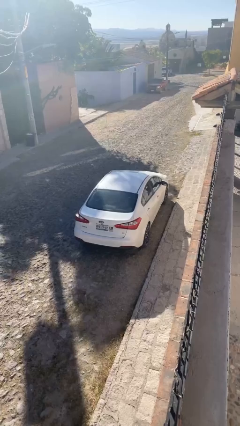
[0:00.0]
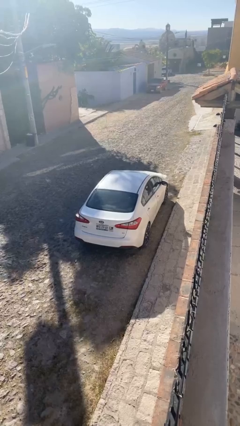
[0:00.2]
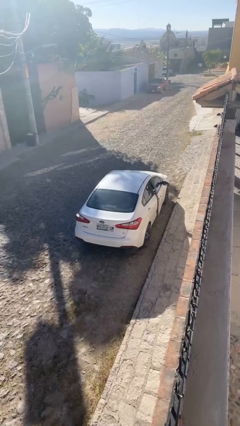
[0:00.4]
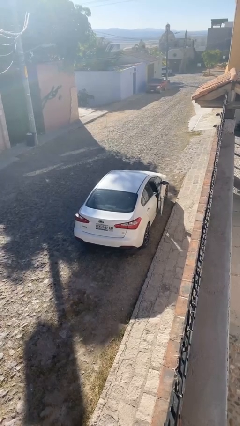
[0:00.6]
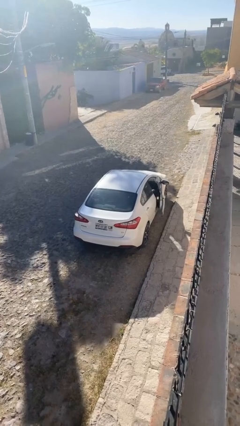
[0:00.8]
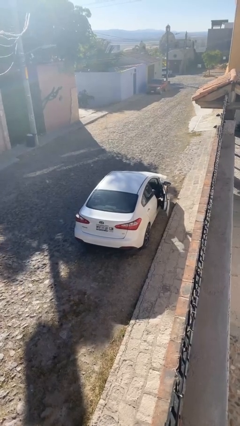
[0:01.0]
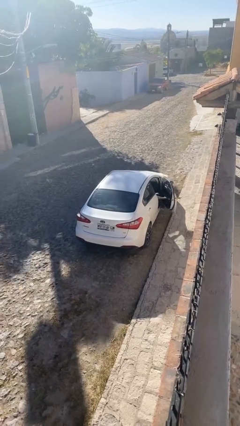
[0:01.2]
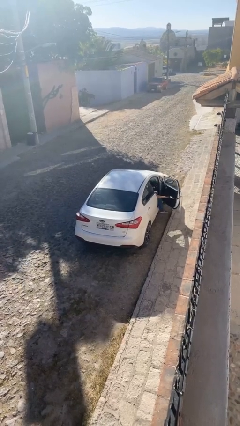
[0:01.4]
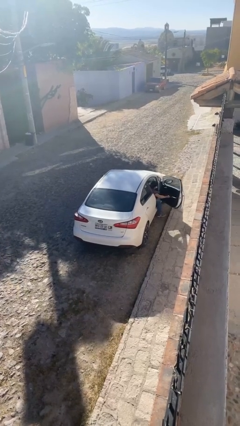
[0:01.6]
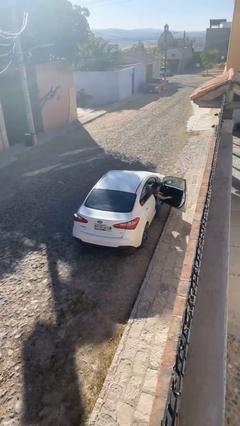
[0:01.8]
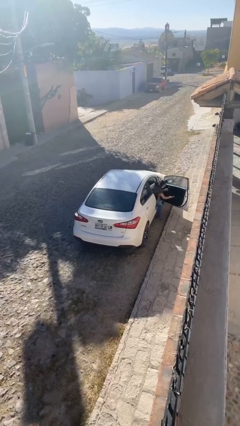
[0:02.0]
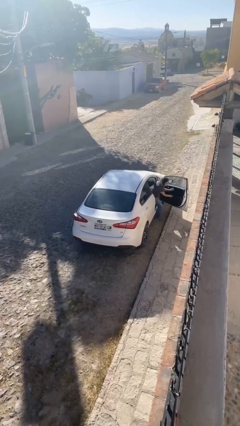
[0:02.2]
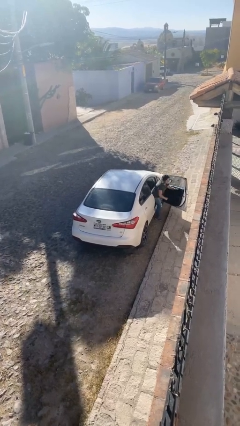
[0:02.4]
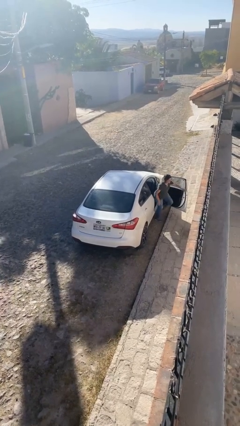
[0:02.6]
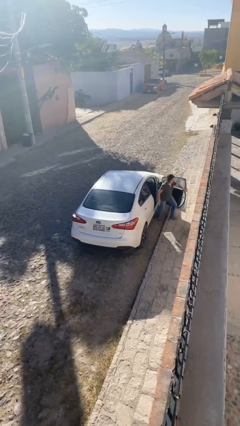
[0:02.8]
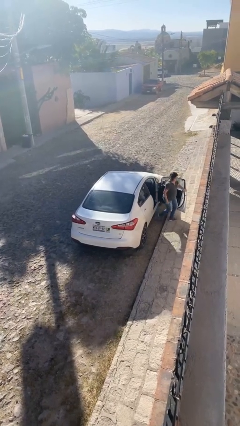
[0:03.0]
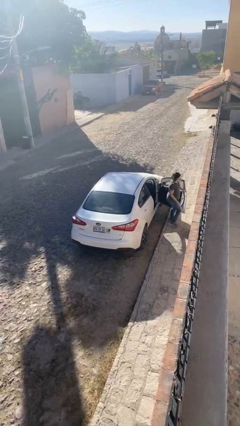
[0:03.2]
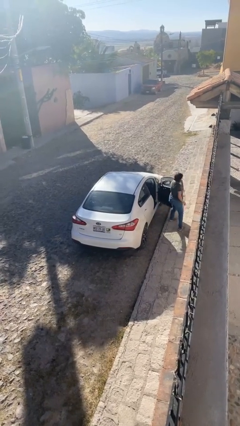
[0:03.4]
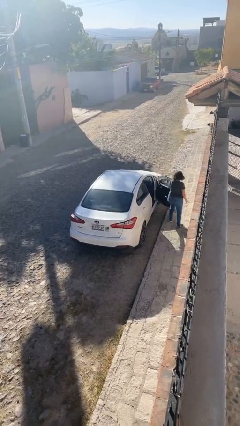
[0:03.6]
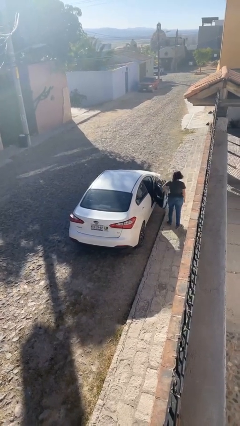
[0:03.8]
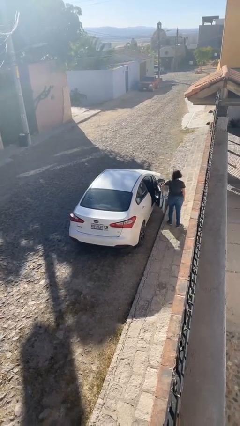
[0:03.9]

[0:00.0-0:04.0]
car drops off person

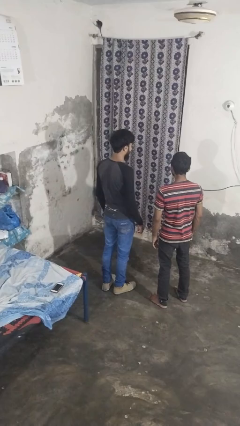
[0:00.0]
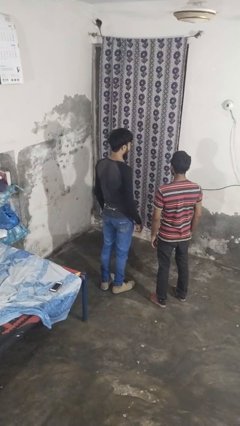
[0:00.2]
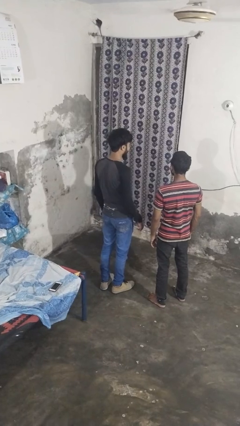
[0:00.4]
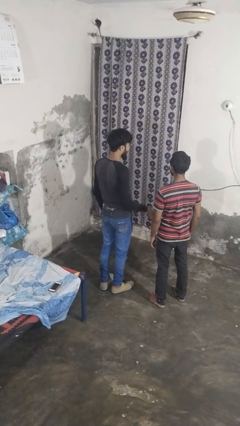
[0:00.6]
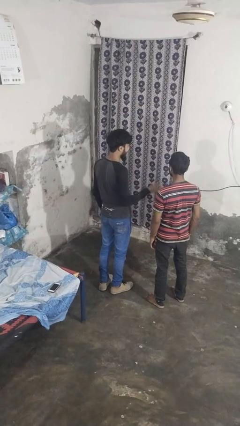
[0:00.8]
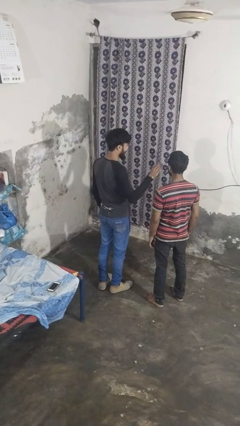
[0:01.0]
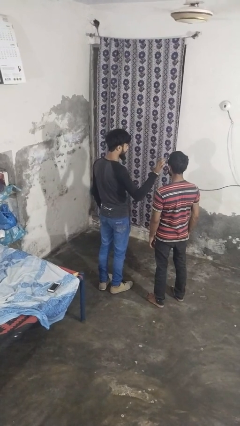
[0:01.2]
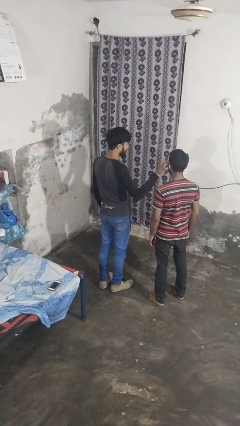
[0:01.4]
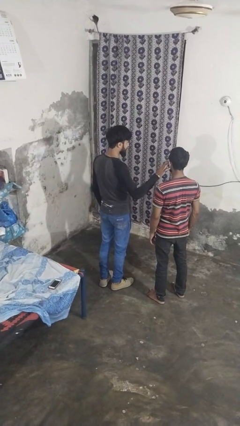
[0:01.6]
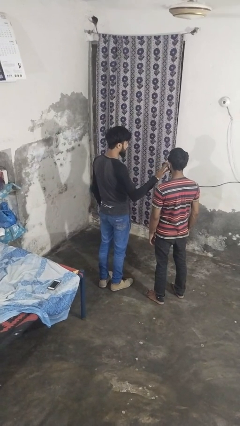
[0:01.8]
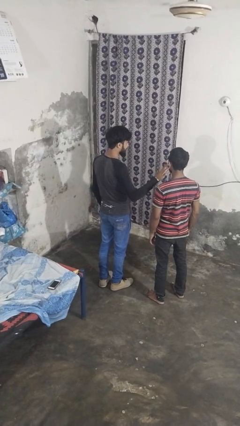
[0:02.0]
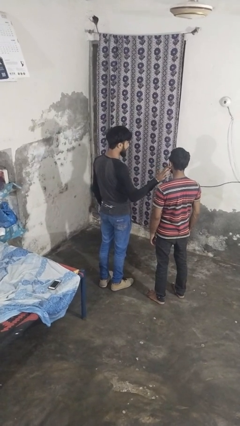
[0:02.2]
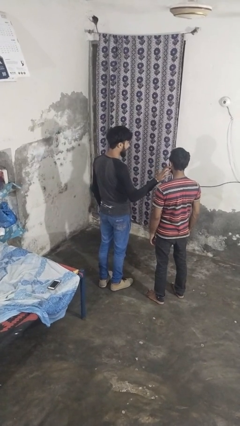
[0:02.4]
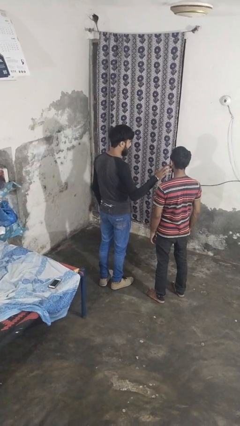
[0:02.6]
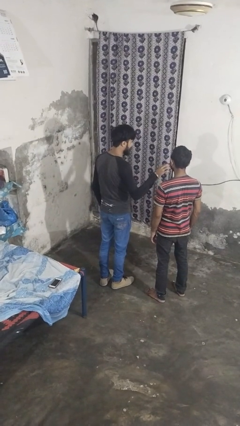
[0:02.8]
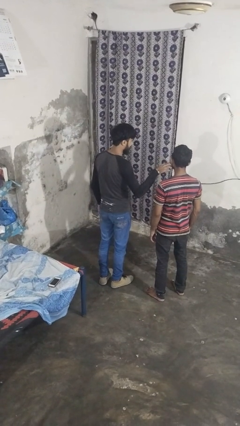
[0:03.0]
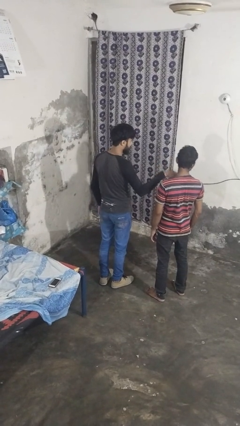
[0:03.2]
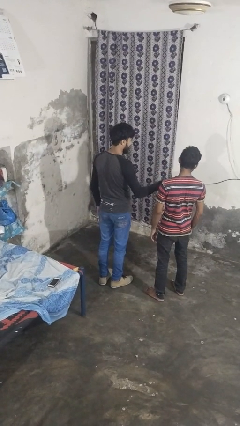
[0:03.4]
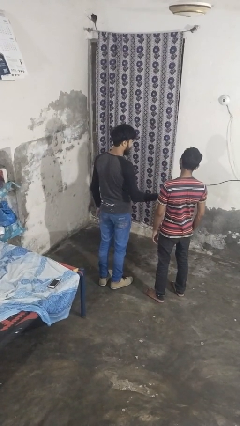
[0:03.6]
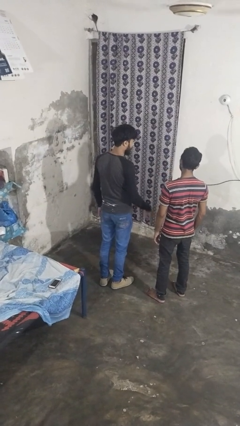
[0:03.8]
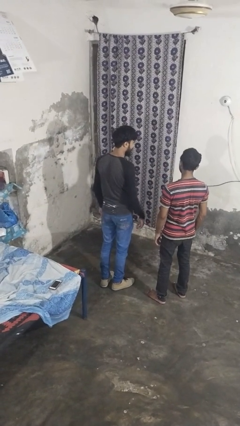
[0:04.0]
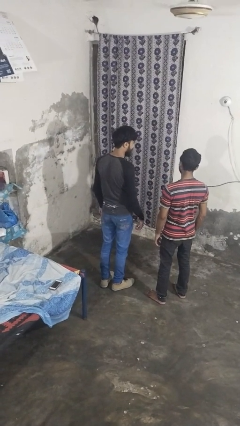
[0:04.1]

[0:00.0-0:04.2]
person touches face of person

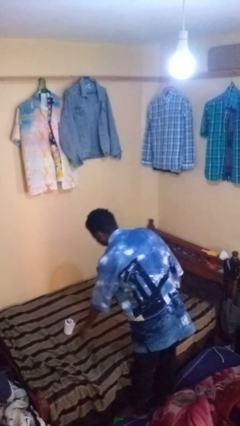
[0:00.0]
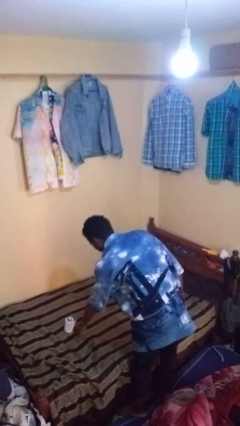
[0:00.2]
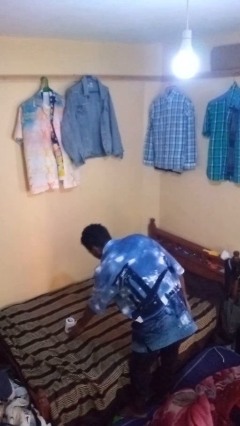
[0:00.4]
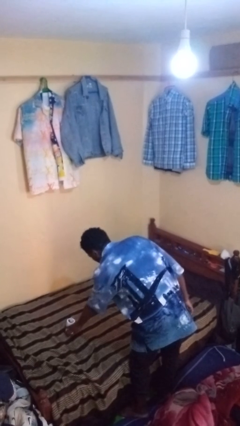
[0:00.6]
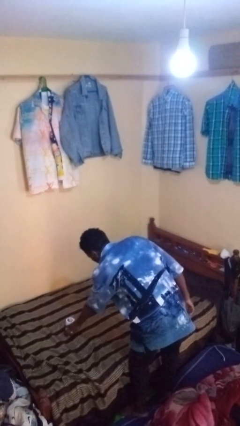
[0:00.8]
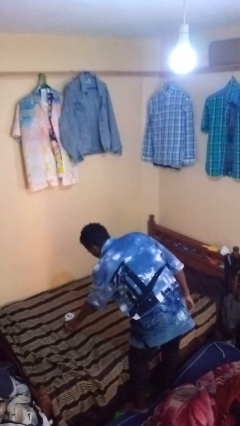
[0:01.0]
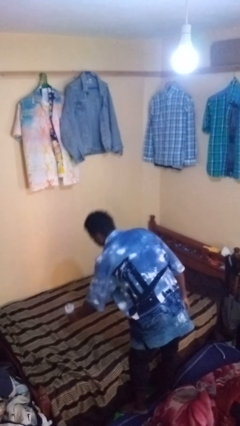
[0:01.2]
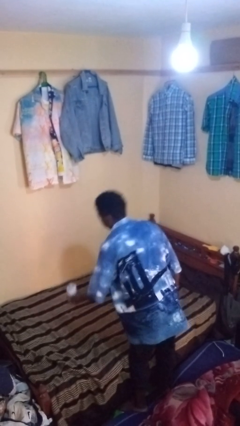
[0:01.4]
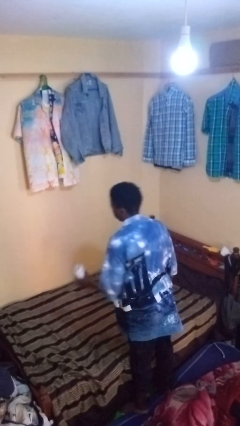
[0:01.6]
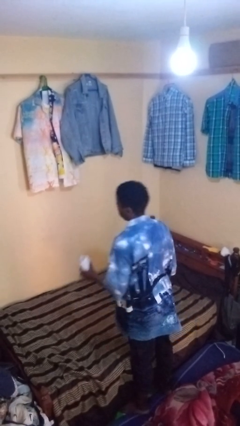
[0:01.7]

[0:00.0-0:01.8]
person picks up object from bed

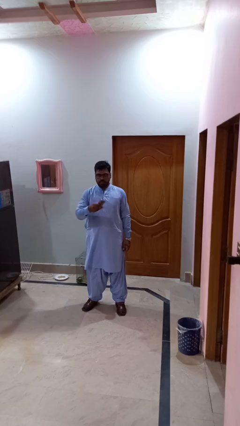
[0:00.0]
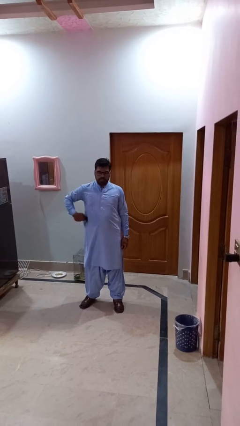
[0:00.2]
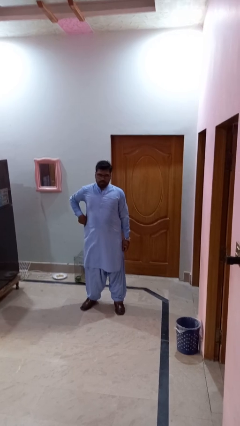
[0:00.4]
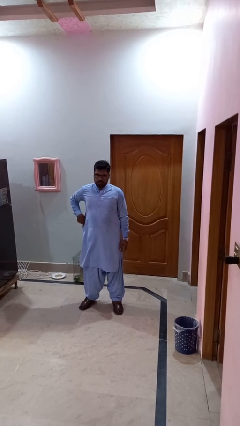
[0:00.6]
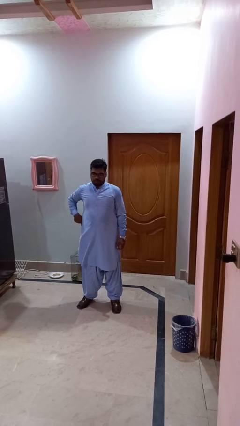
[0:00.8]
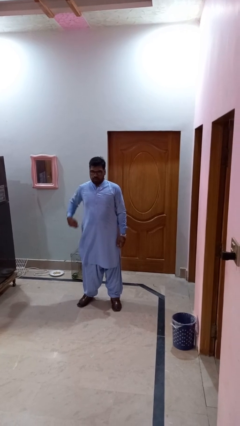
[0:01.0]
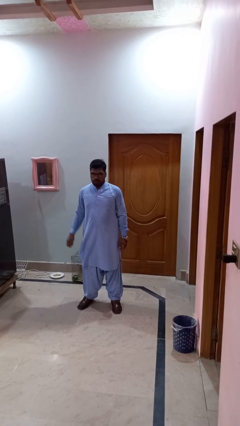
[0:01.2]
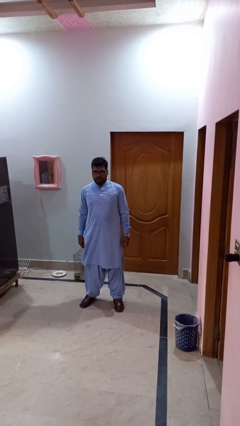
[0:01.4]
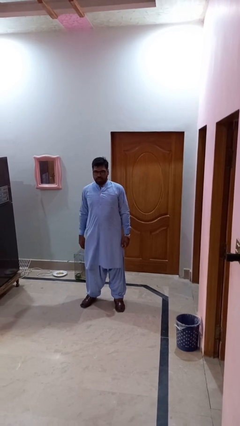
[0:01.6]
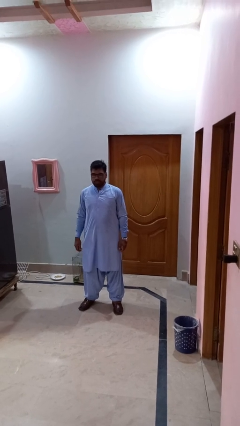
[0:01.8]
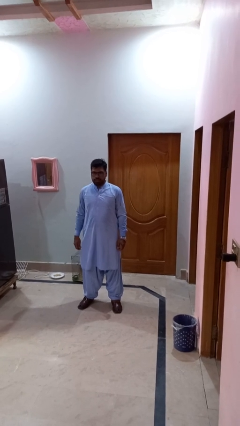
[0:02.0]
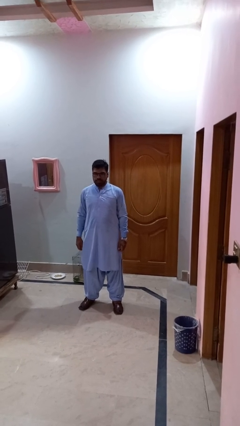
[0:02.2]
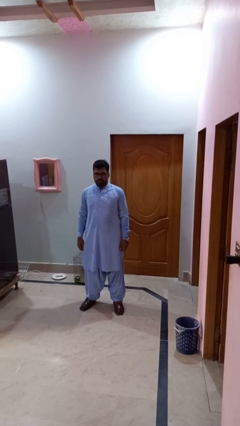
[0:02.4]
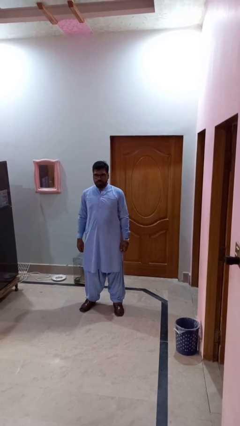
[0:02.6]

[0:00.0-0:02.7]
person puts phone into pocket

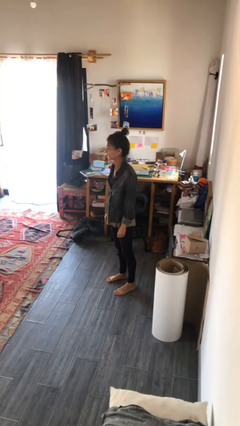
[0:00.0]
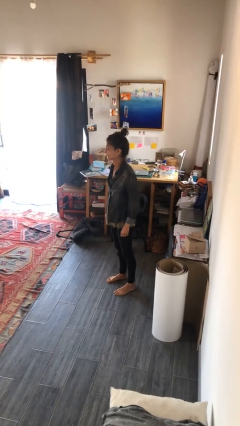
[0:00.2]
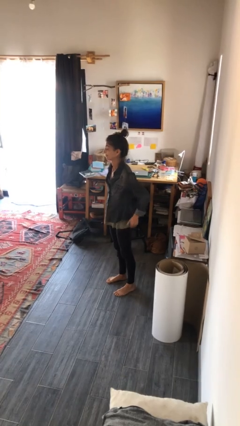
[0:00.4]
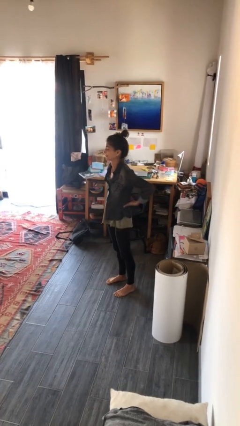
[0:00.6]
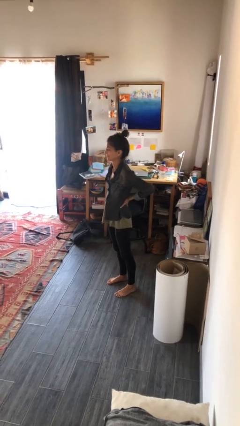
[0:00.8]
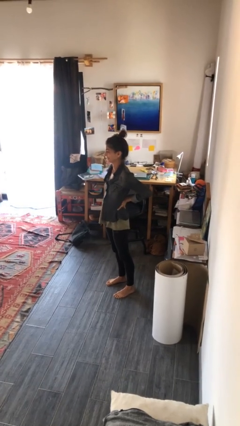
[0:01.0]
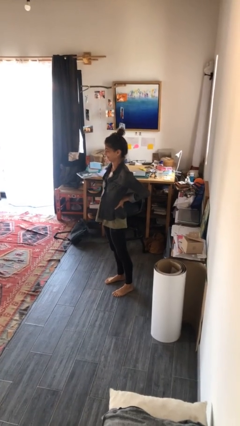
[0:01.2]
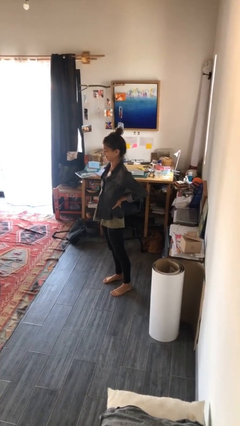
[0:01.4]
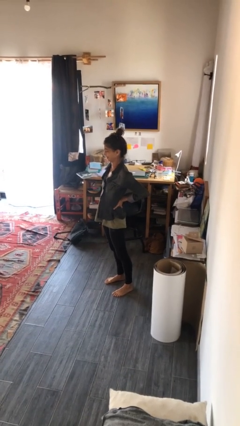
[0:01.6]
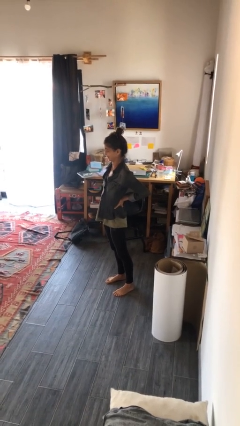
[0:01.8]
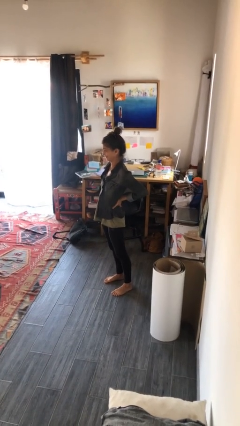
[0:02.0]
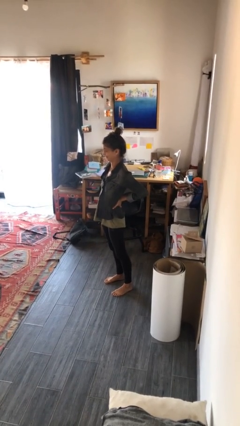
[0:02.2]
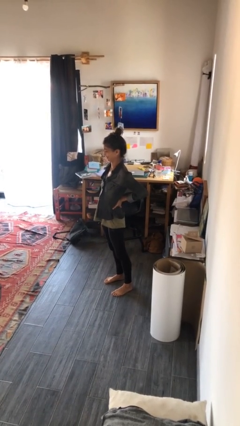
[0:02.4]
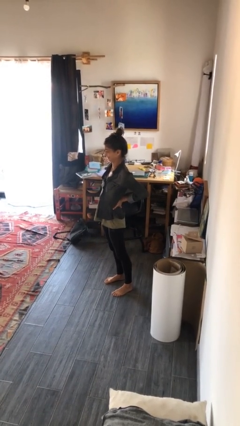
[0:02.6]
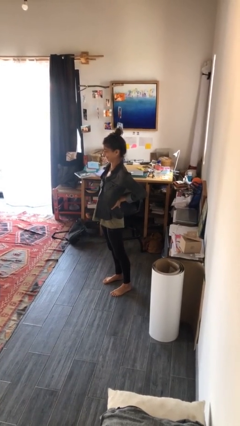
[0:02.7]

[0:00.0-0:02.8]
person stretches back

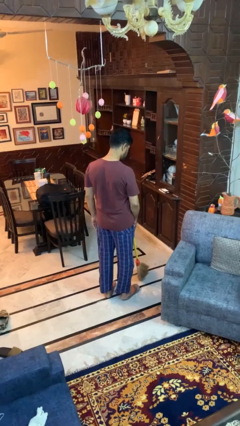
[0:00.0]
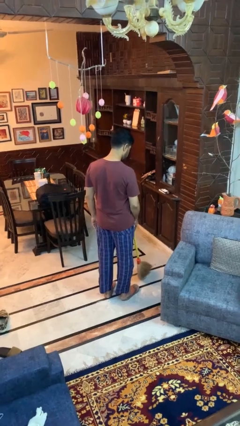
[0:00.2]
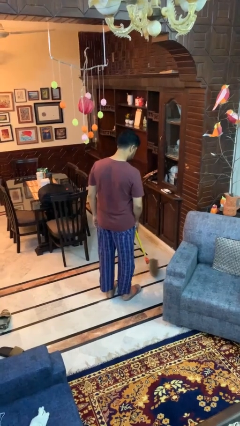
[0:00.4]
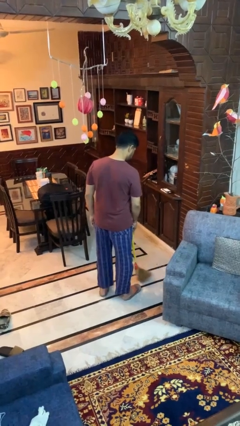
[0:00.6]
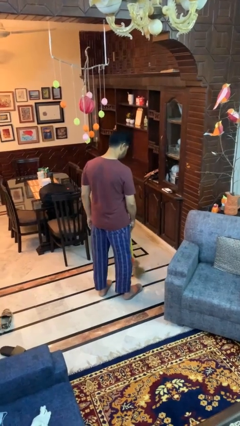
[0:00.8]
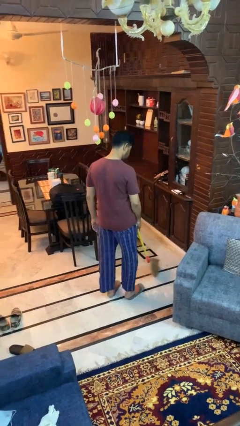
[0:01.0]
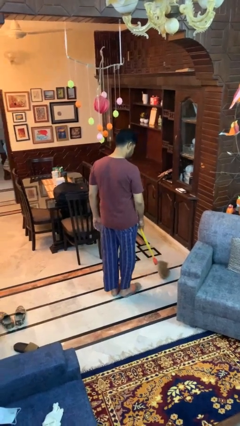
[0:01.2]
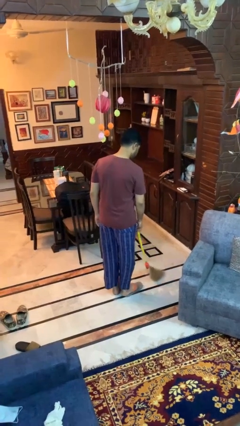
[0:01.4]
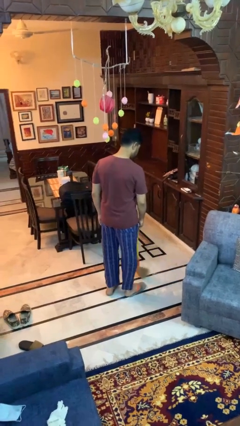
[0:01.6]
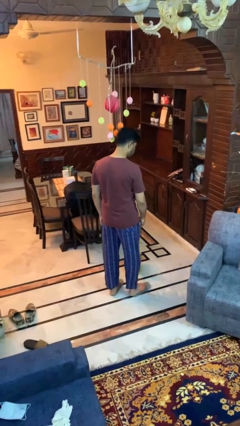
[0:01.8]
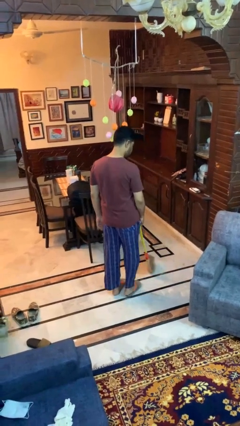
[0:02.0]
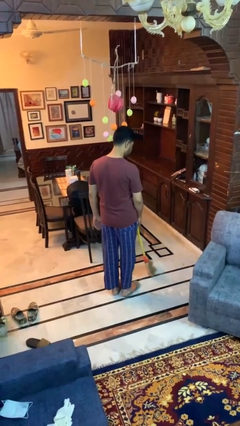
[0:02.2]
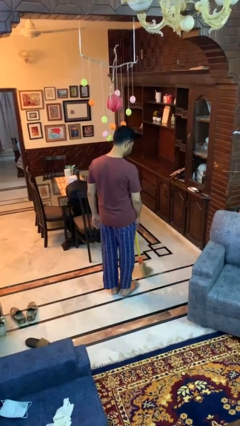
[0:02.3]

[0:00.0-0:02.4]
person sweeps floor
